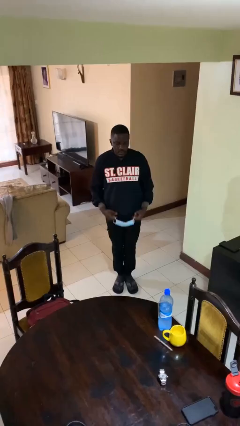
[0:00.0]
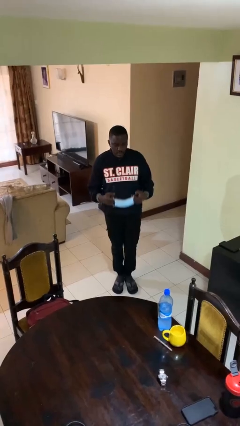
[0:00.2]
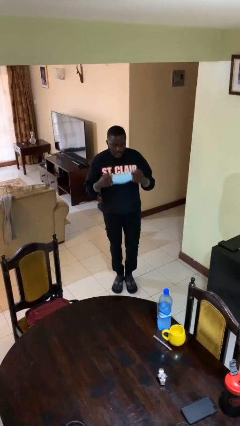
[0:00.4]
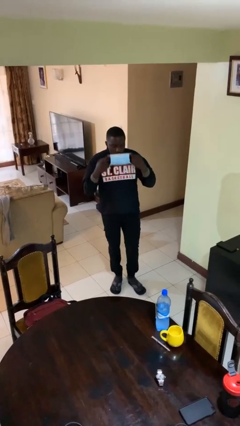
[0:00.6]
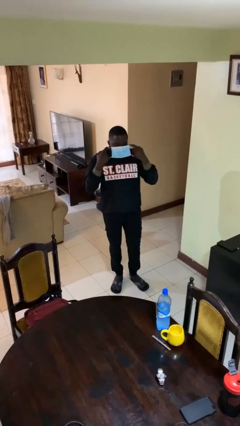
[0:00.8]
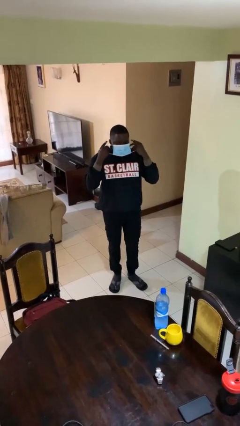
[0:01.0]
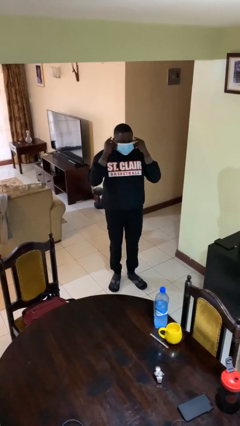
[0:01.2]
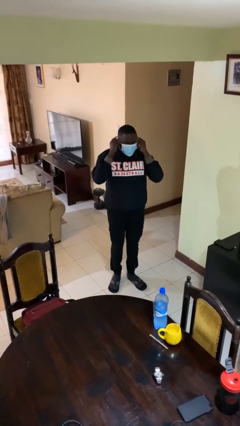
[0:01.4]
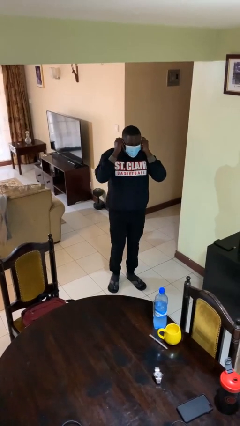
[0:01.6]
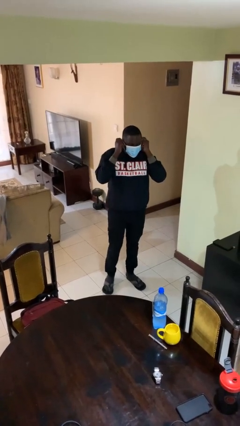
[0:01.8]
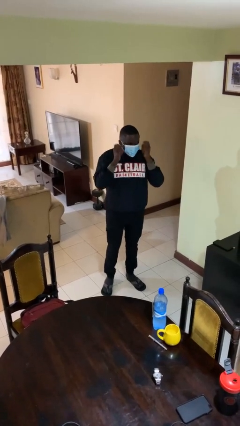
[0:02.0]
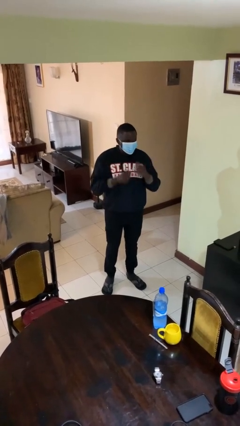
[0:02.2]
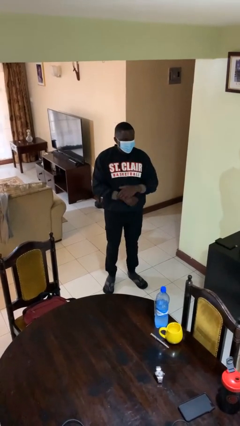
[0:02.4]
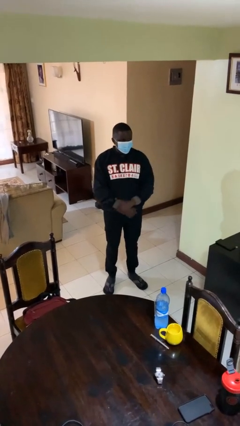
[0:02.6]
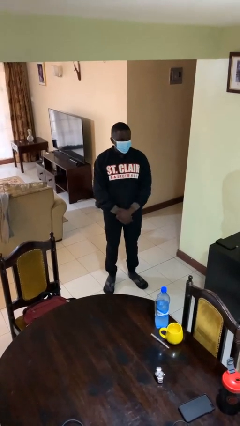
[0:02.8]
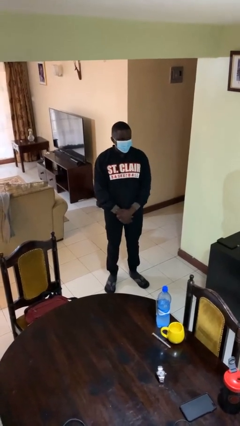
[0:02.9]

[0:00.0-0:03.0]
person puts on facemask

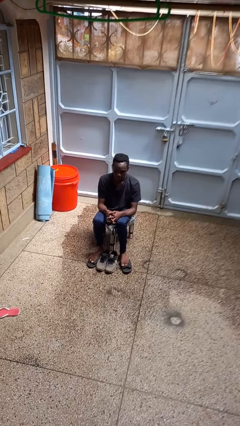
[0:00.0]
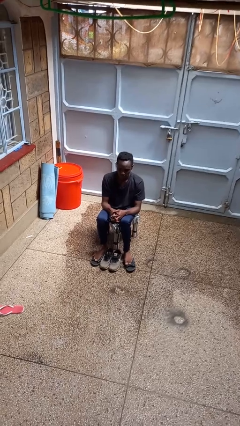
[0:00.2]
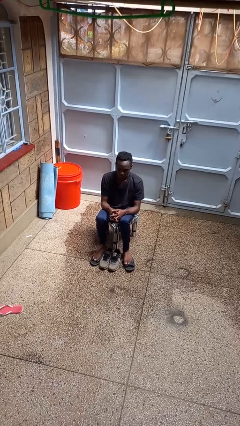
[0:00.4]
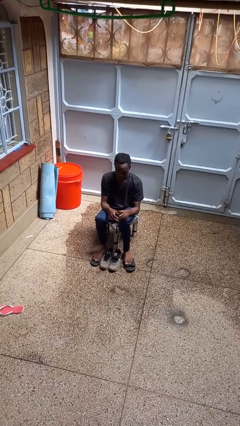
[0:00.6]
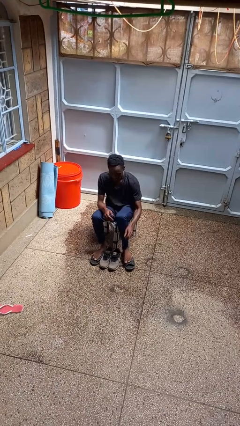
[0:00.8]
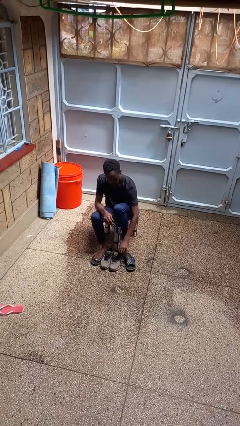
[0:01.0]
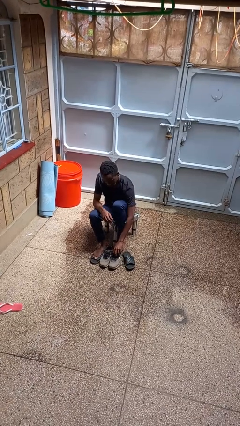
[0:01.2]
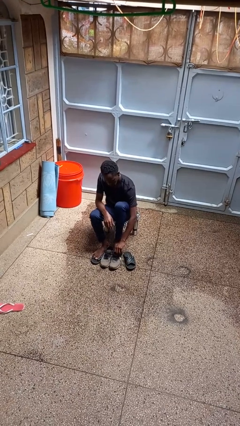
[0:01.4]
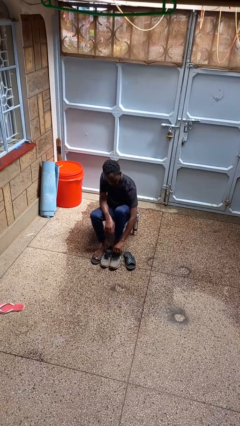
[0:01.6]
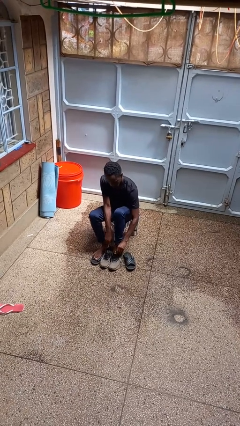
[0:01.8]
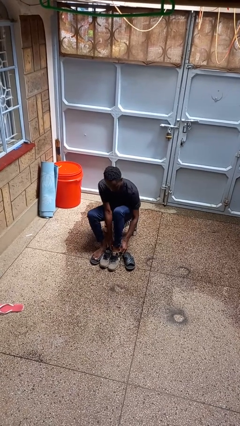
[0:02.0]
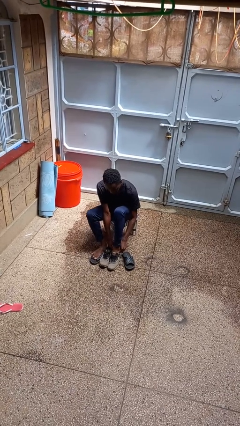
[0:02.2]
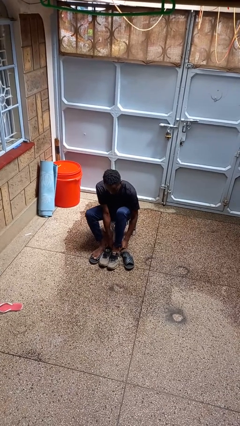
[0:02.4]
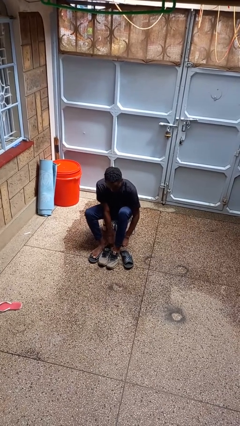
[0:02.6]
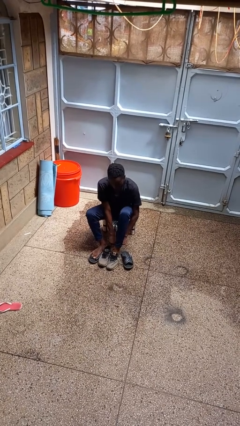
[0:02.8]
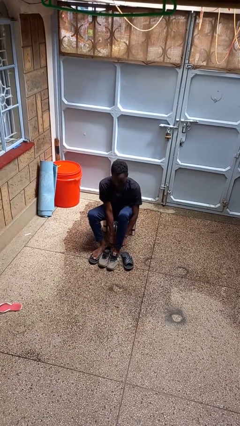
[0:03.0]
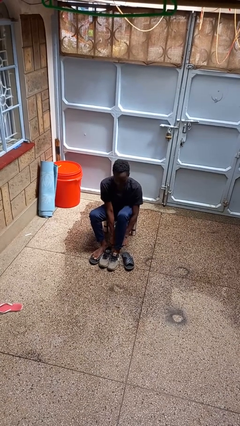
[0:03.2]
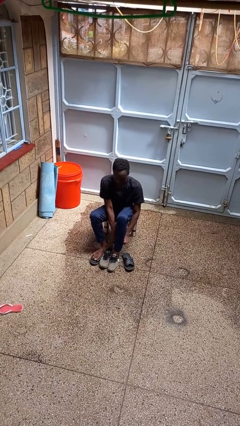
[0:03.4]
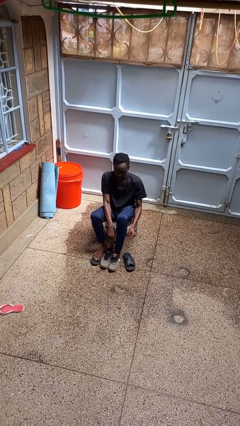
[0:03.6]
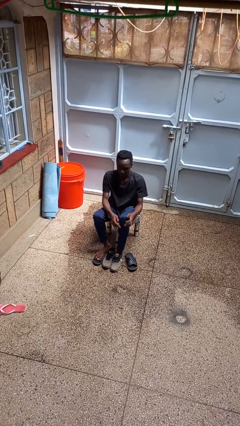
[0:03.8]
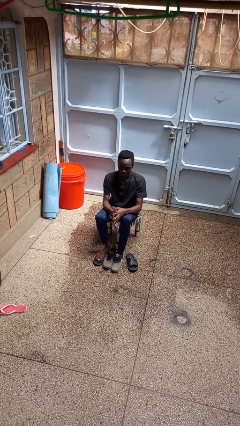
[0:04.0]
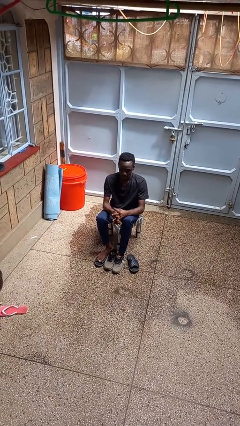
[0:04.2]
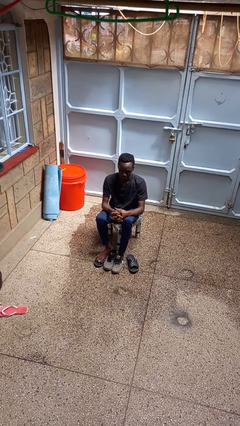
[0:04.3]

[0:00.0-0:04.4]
person puts on shoes

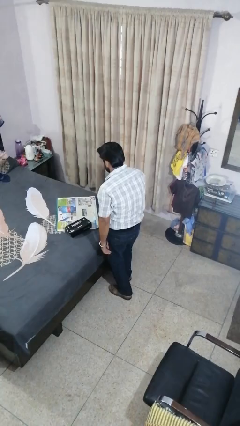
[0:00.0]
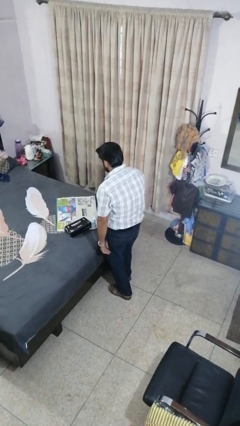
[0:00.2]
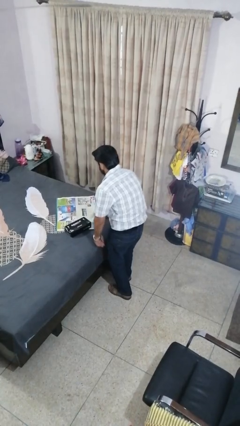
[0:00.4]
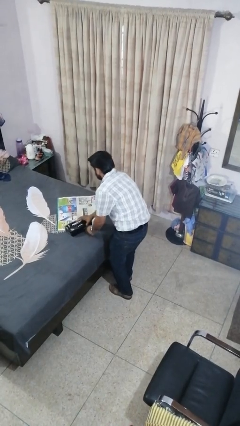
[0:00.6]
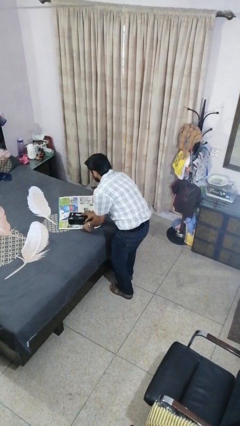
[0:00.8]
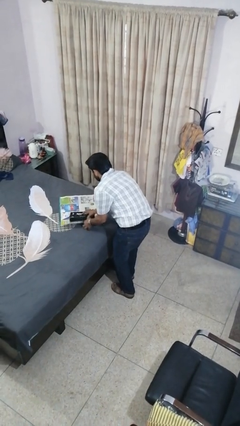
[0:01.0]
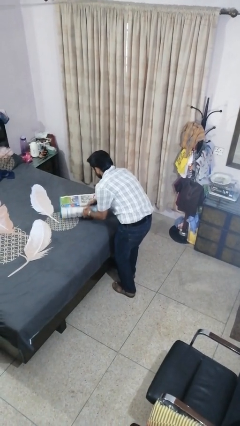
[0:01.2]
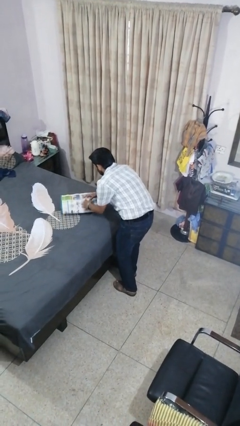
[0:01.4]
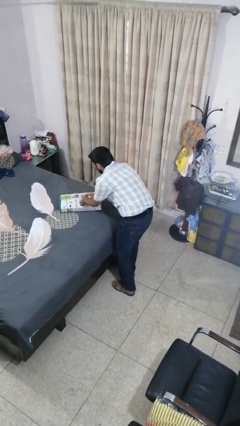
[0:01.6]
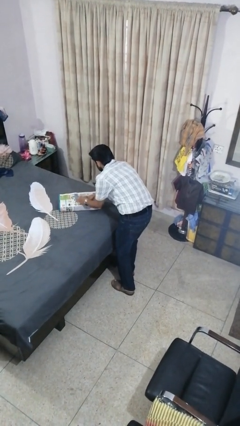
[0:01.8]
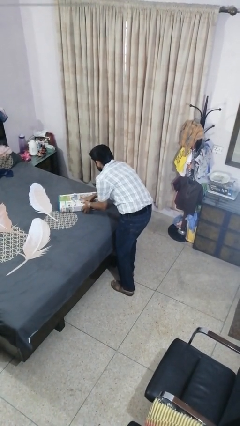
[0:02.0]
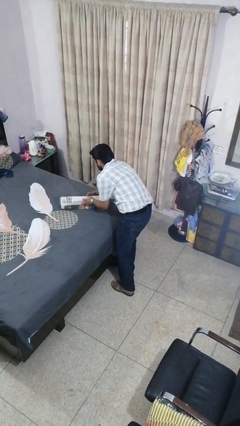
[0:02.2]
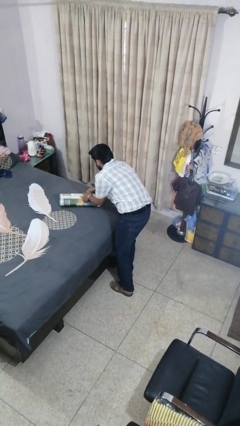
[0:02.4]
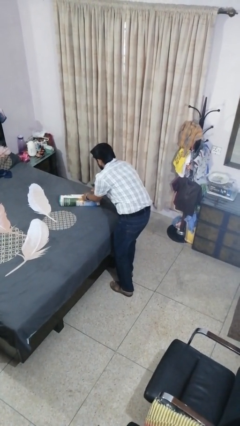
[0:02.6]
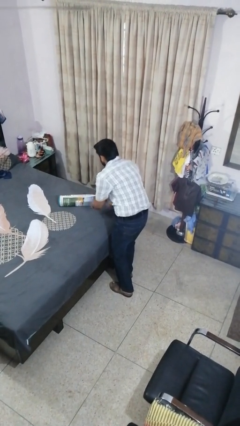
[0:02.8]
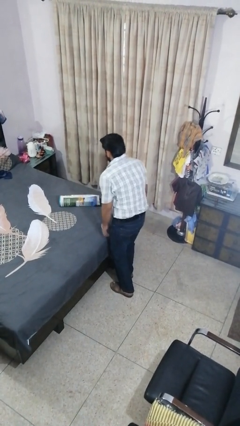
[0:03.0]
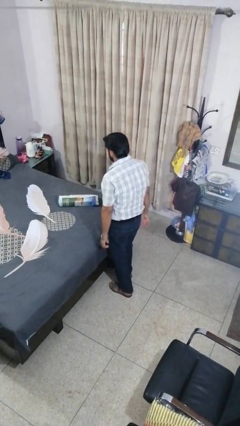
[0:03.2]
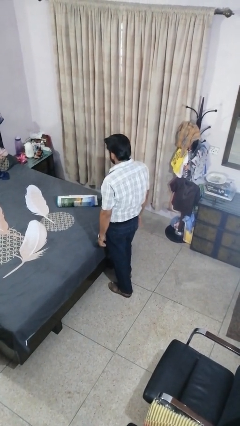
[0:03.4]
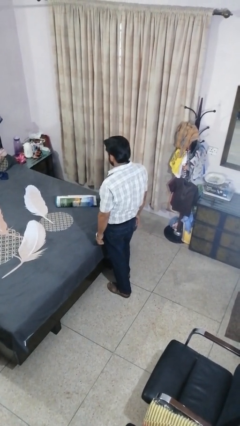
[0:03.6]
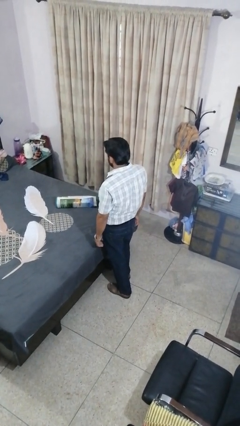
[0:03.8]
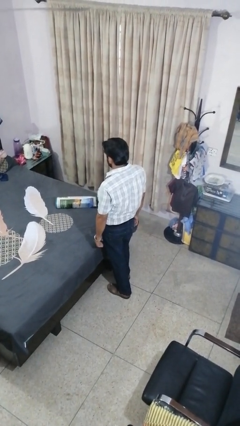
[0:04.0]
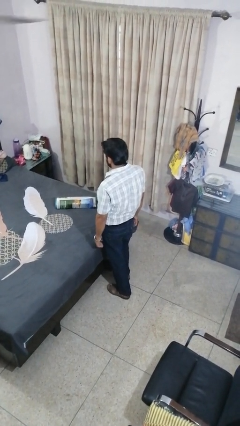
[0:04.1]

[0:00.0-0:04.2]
person wraps box

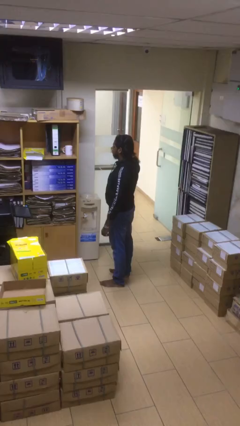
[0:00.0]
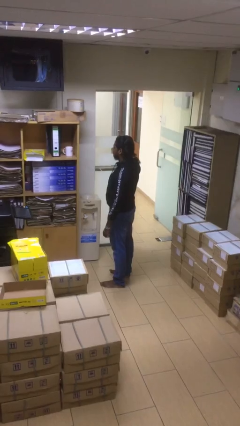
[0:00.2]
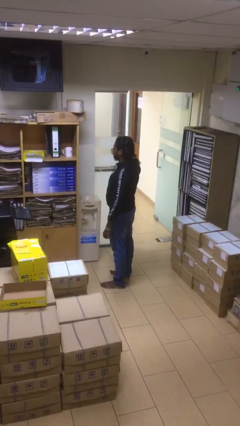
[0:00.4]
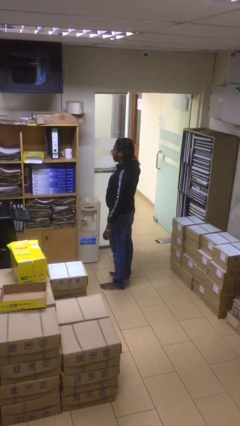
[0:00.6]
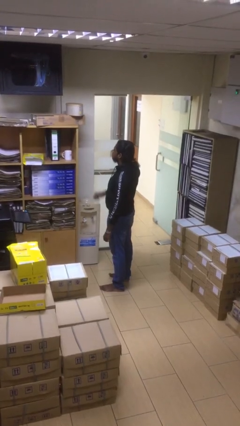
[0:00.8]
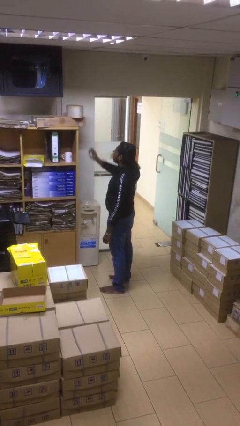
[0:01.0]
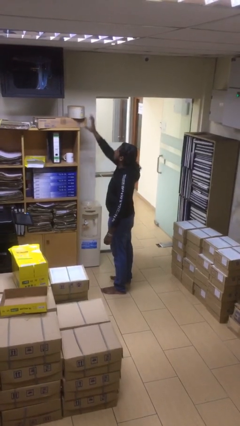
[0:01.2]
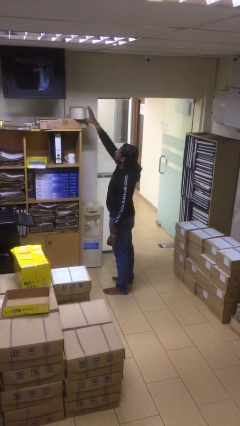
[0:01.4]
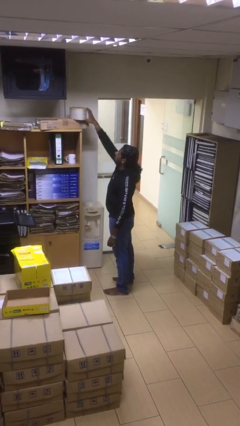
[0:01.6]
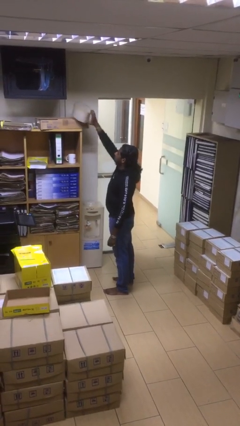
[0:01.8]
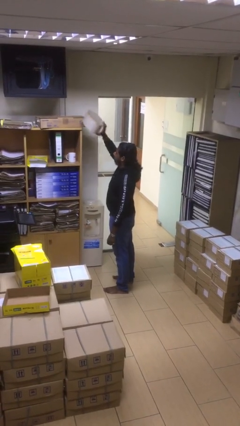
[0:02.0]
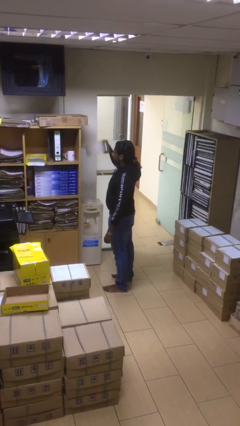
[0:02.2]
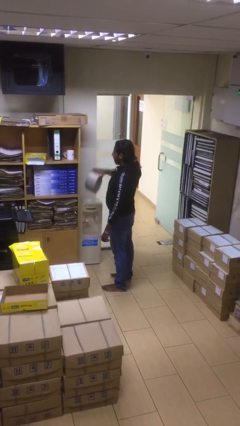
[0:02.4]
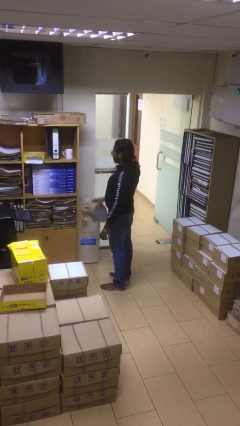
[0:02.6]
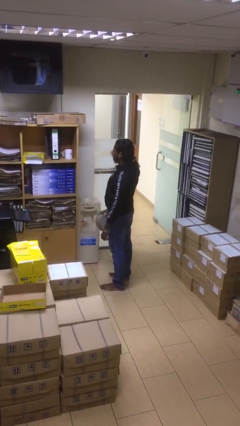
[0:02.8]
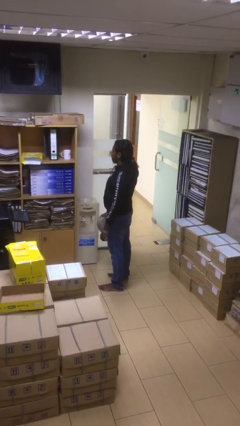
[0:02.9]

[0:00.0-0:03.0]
person picks up object from shelf

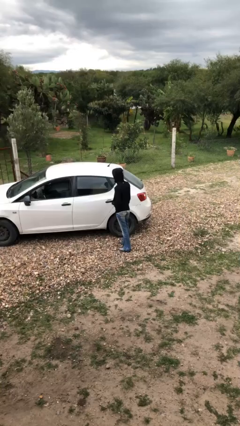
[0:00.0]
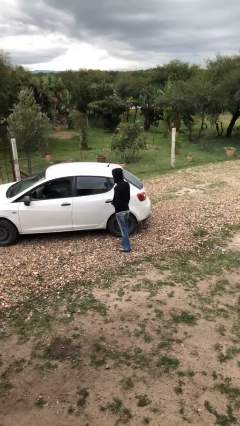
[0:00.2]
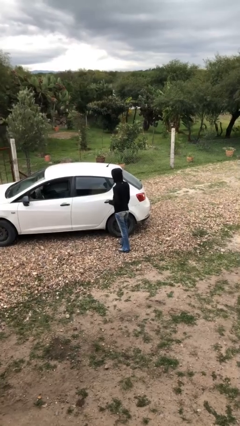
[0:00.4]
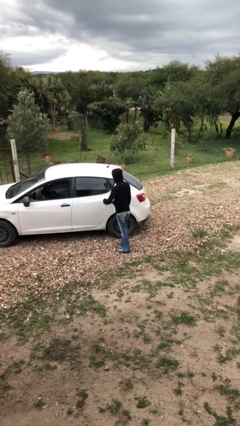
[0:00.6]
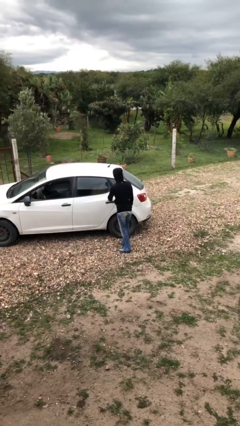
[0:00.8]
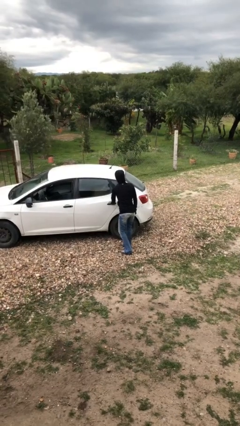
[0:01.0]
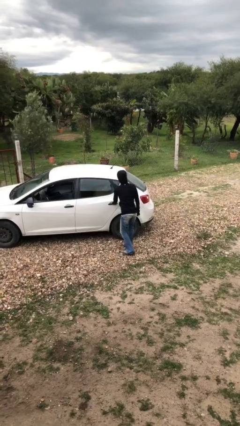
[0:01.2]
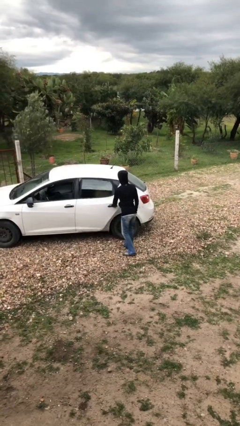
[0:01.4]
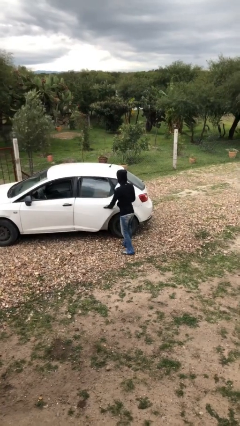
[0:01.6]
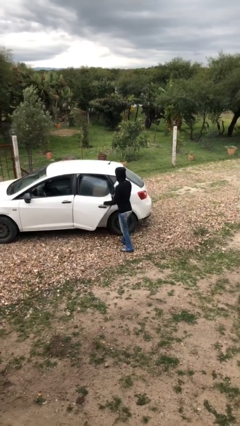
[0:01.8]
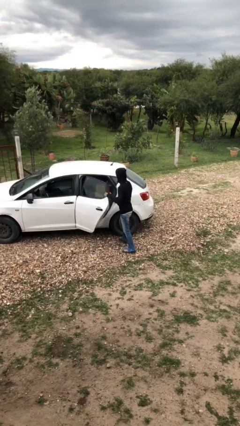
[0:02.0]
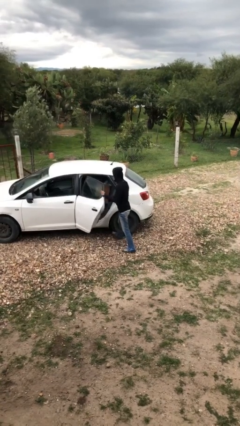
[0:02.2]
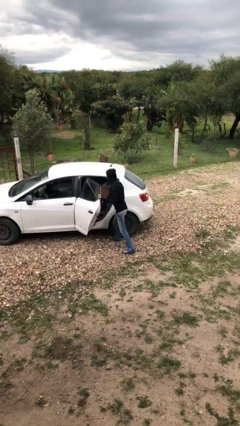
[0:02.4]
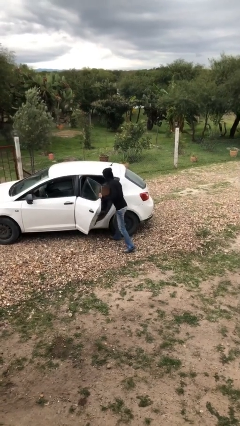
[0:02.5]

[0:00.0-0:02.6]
person opens car door

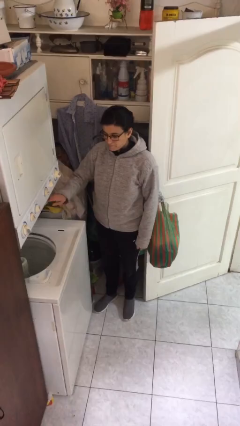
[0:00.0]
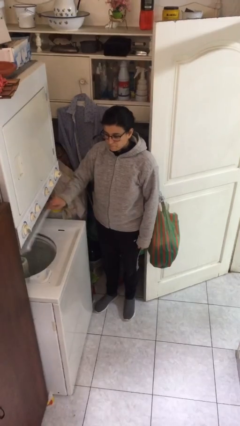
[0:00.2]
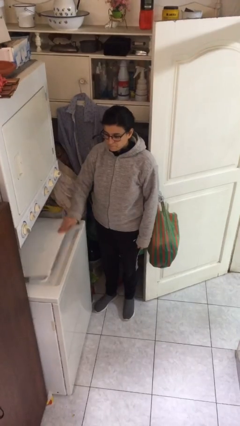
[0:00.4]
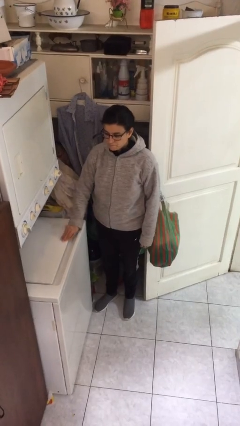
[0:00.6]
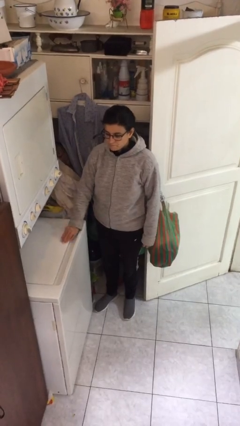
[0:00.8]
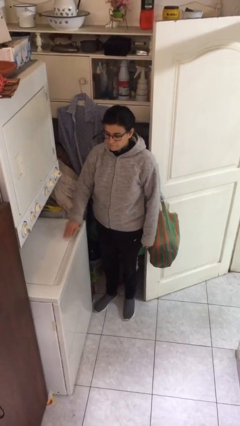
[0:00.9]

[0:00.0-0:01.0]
person closes clothes washer
